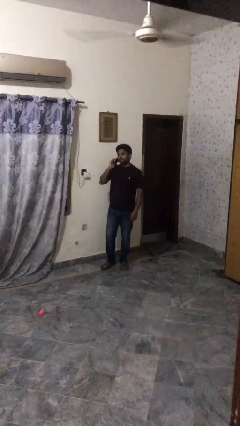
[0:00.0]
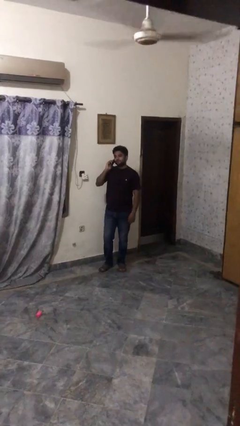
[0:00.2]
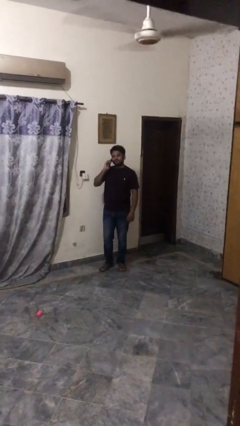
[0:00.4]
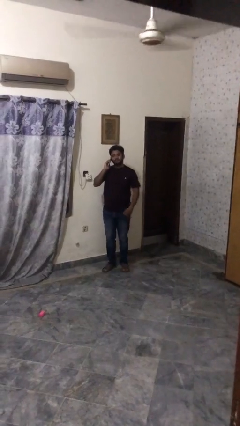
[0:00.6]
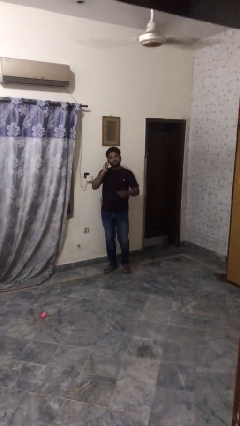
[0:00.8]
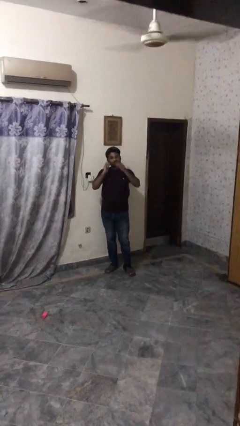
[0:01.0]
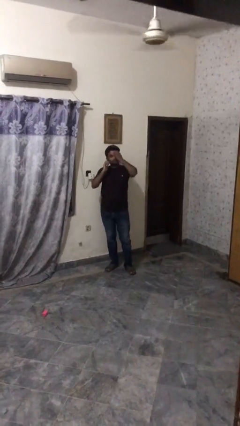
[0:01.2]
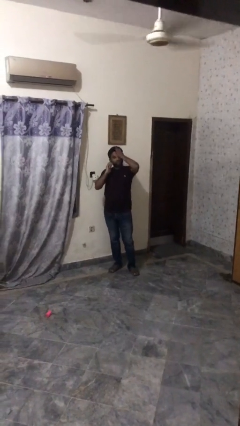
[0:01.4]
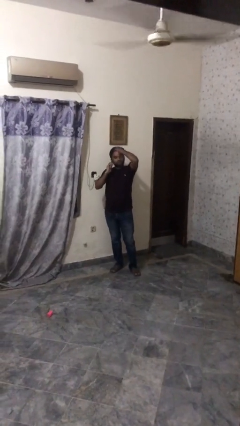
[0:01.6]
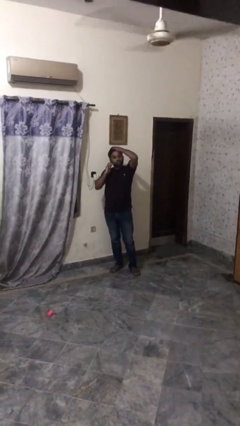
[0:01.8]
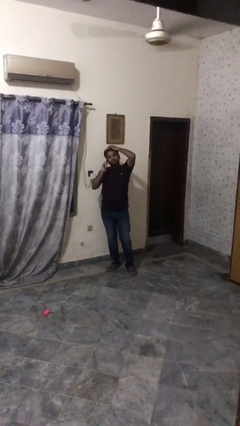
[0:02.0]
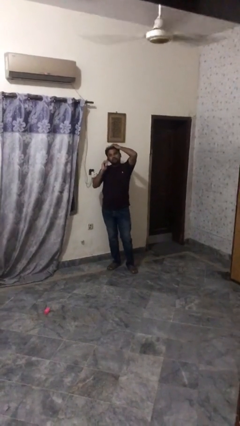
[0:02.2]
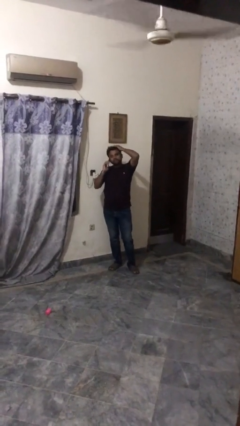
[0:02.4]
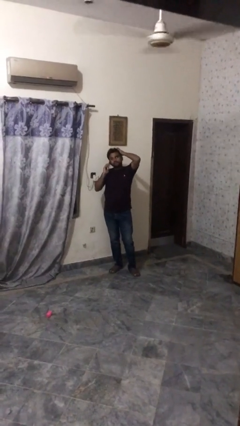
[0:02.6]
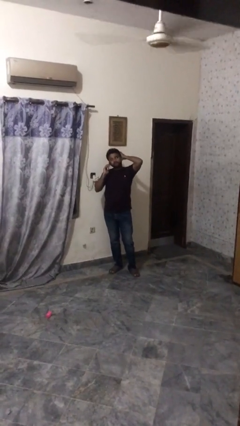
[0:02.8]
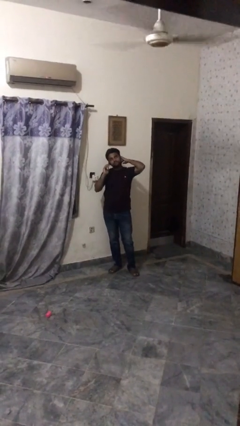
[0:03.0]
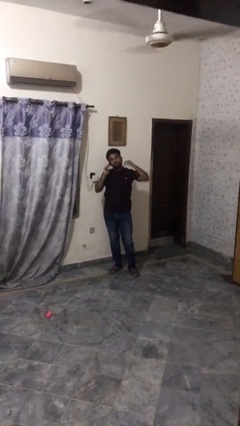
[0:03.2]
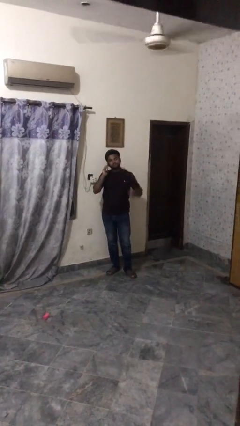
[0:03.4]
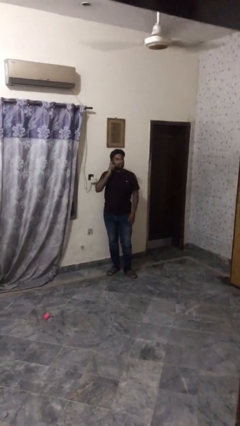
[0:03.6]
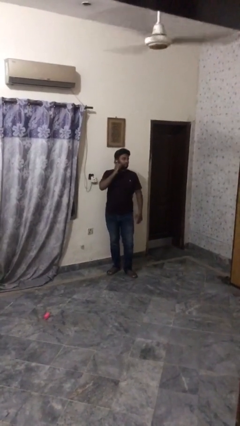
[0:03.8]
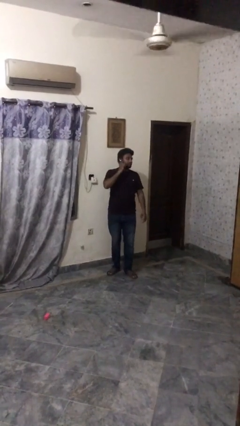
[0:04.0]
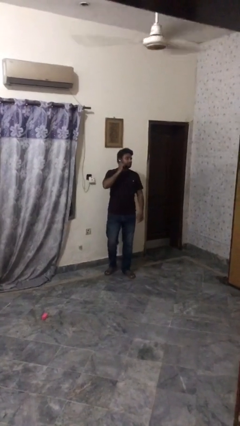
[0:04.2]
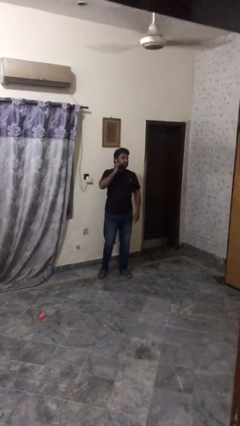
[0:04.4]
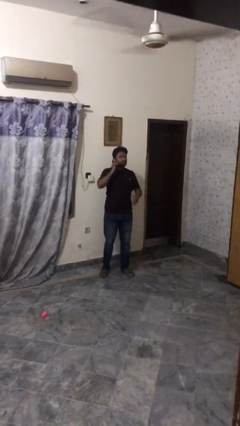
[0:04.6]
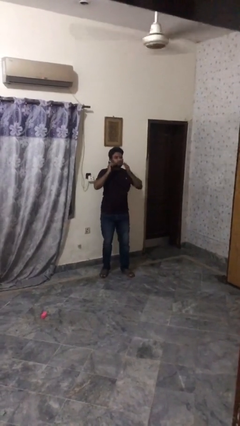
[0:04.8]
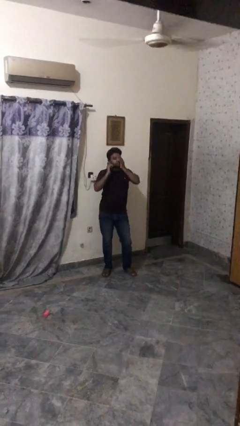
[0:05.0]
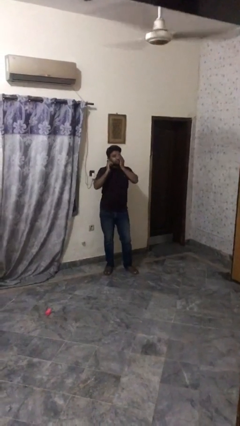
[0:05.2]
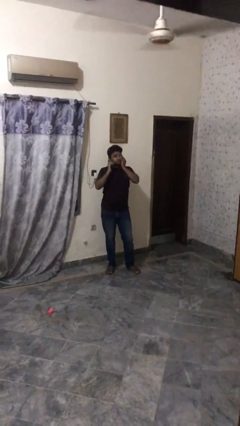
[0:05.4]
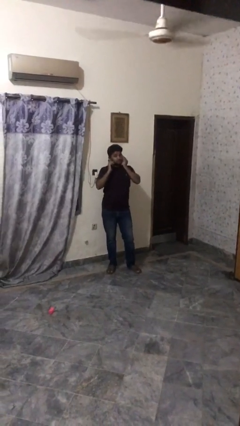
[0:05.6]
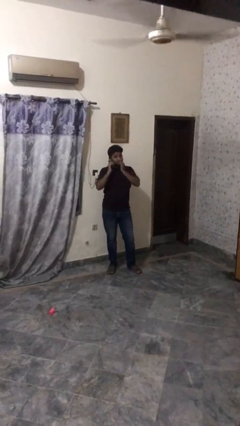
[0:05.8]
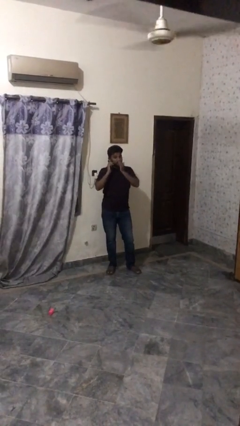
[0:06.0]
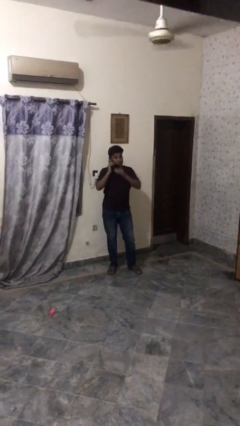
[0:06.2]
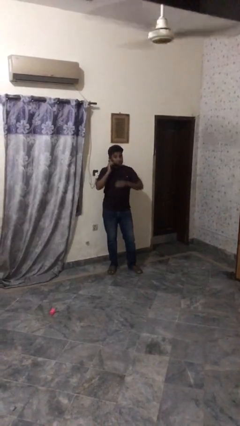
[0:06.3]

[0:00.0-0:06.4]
person talks on phone

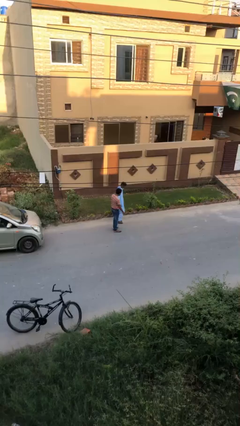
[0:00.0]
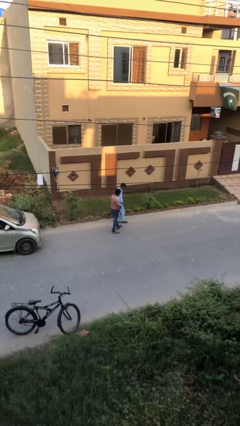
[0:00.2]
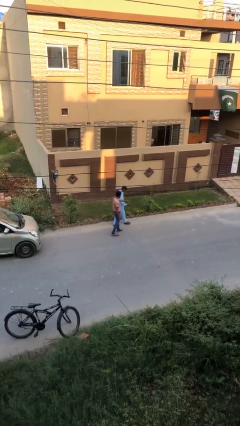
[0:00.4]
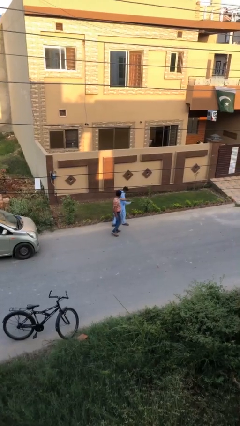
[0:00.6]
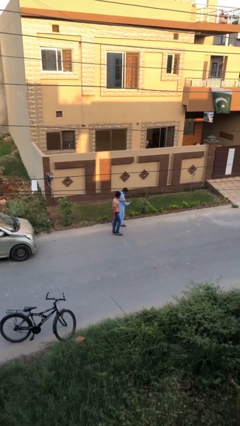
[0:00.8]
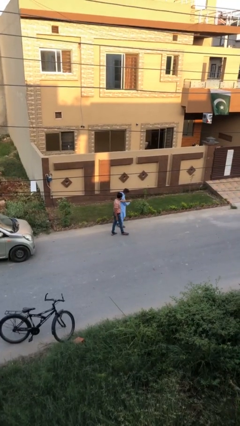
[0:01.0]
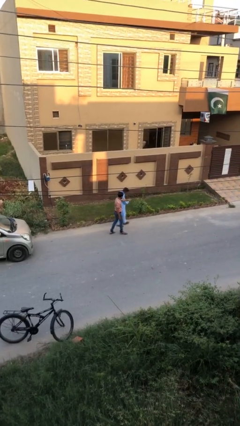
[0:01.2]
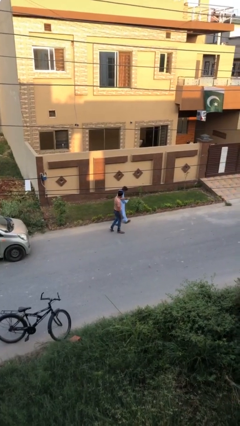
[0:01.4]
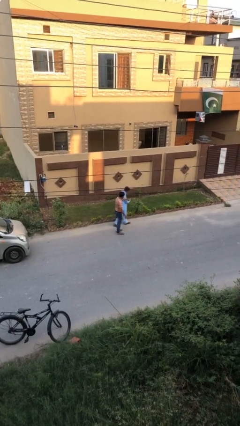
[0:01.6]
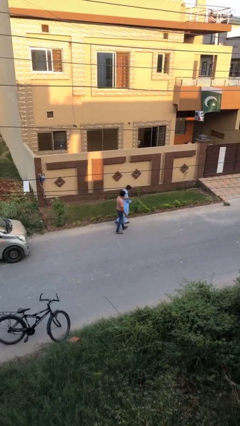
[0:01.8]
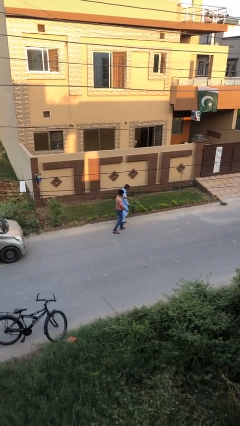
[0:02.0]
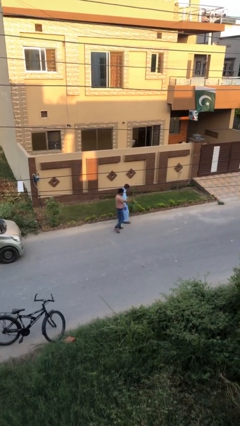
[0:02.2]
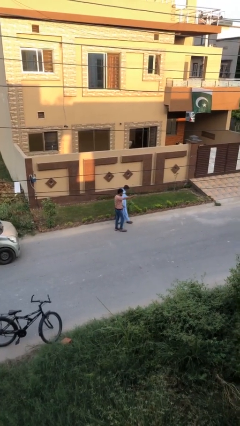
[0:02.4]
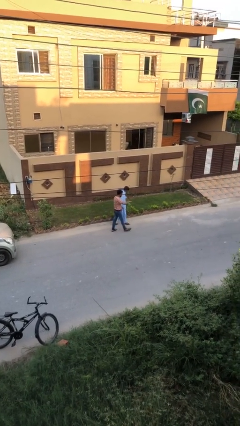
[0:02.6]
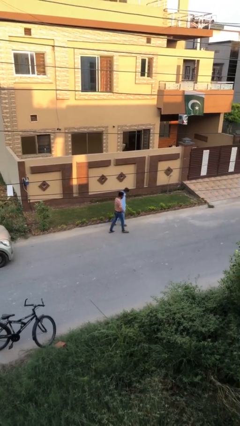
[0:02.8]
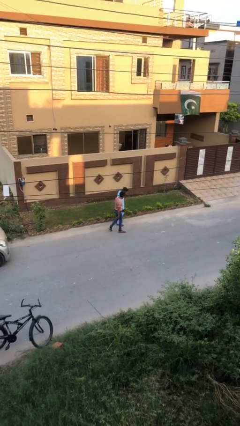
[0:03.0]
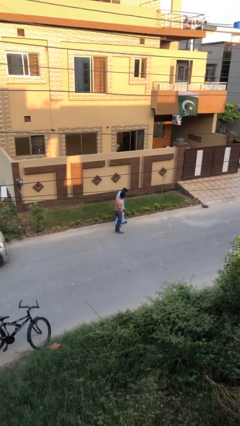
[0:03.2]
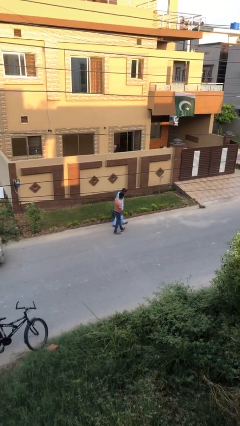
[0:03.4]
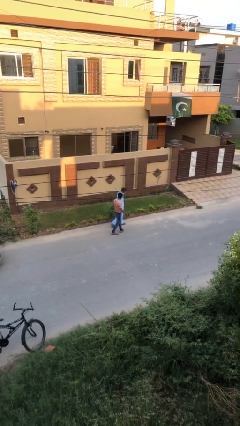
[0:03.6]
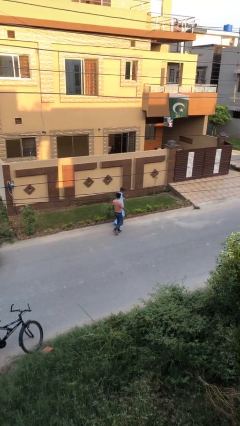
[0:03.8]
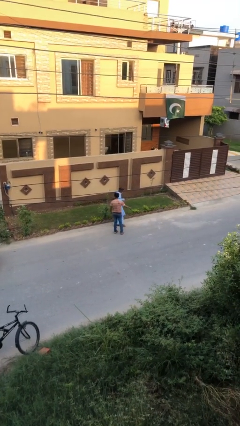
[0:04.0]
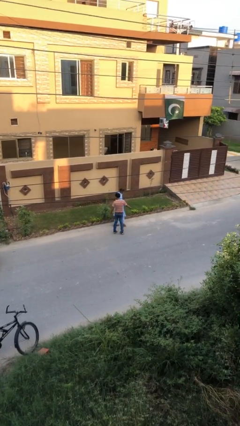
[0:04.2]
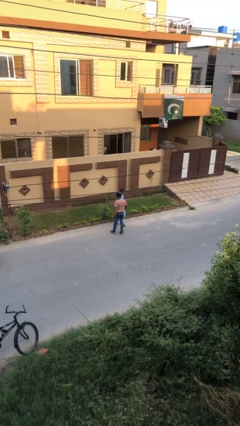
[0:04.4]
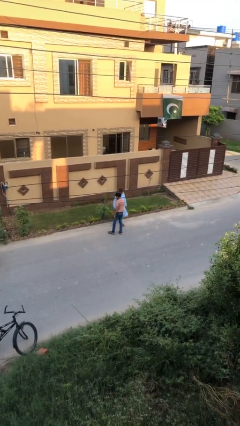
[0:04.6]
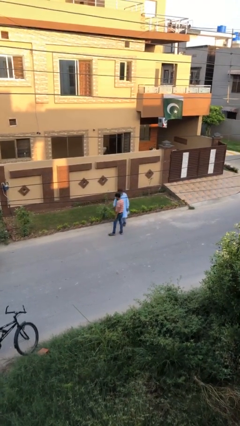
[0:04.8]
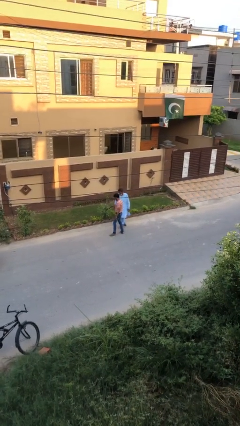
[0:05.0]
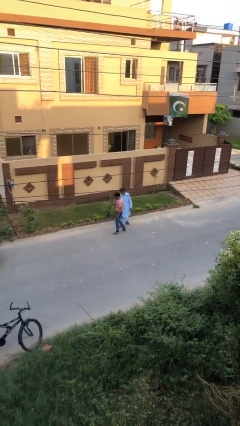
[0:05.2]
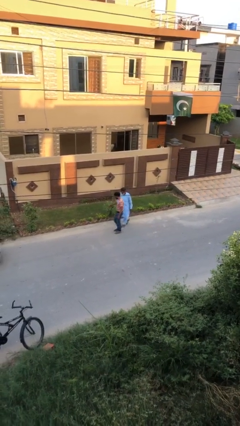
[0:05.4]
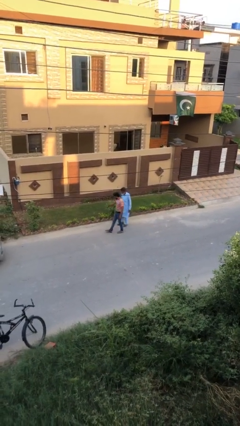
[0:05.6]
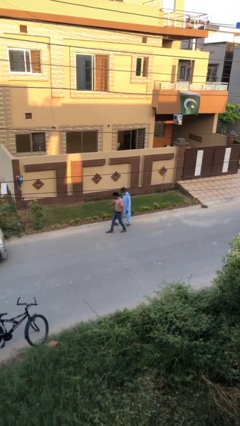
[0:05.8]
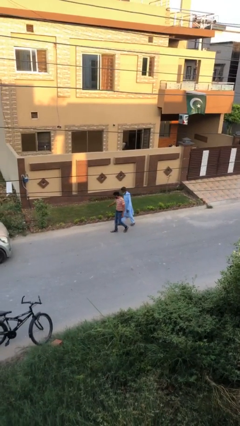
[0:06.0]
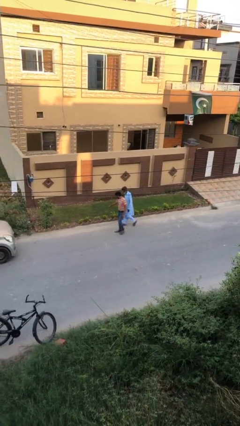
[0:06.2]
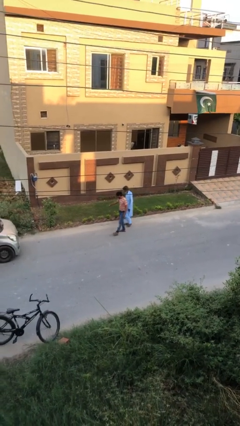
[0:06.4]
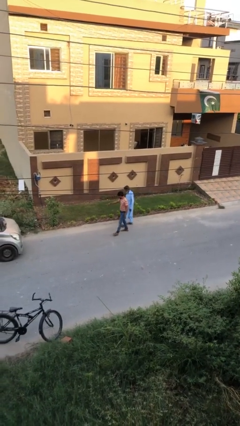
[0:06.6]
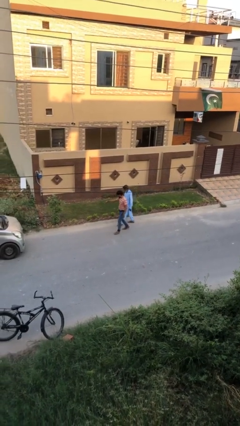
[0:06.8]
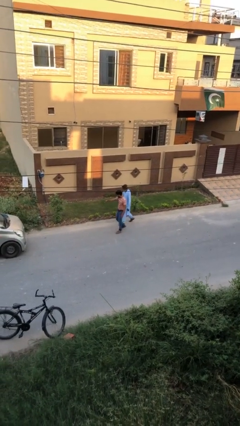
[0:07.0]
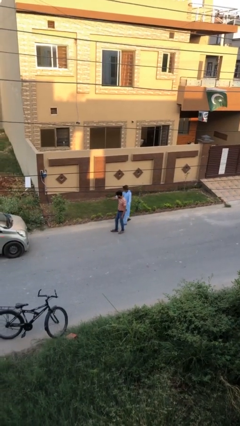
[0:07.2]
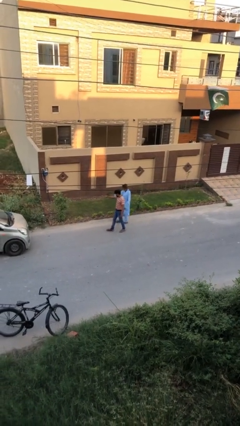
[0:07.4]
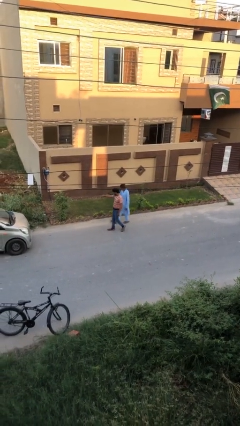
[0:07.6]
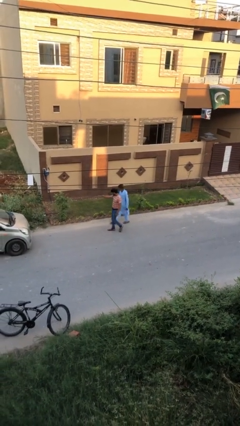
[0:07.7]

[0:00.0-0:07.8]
person talks to person

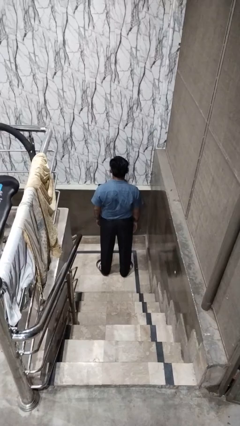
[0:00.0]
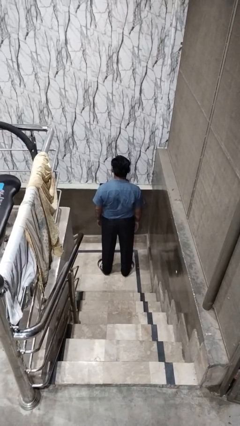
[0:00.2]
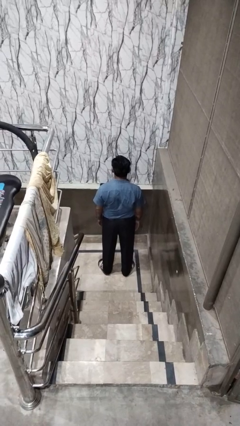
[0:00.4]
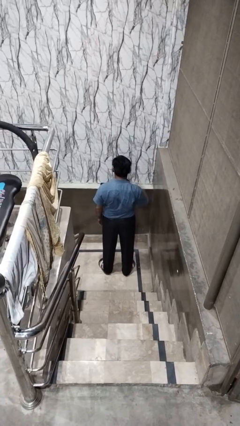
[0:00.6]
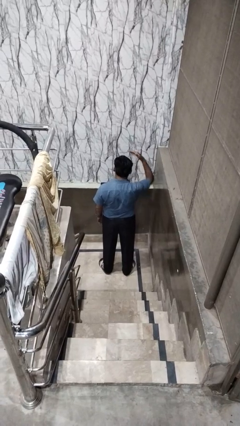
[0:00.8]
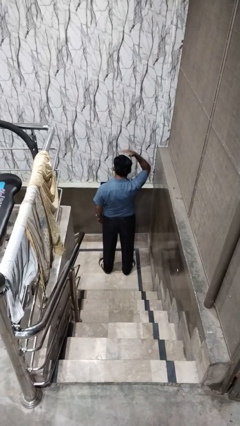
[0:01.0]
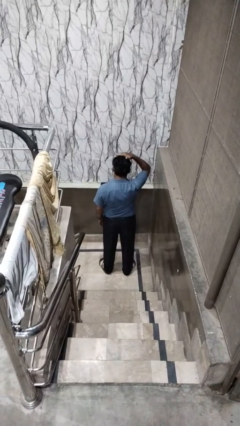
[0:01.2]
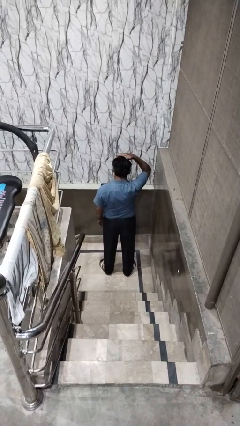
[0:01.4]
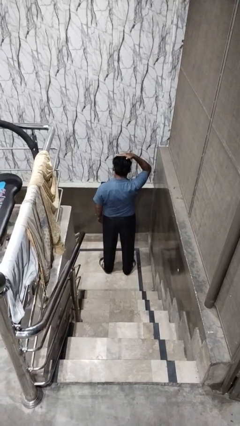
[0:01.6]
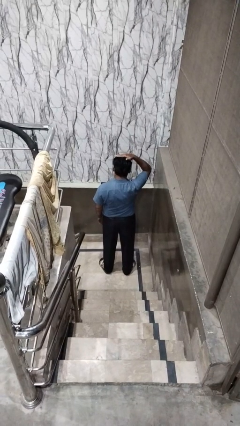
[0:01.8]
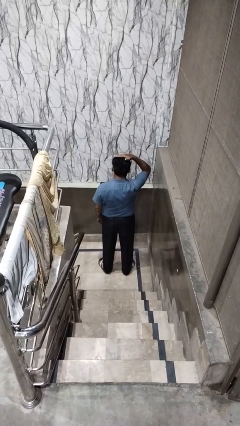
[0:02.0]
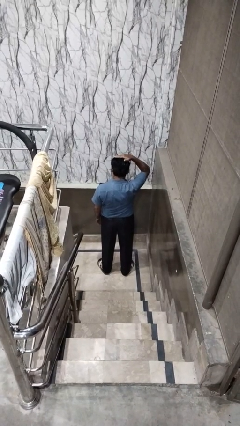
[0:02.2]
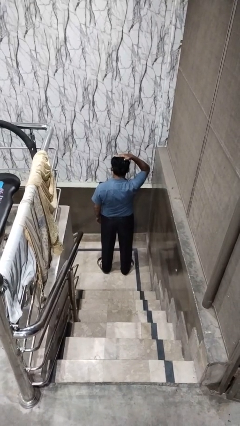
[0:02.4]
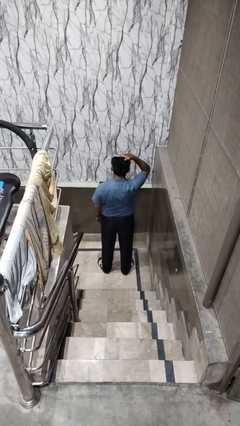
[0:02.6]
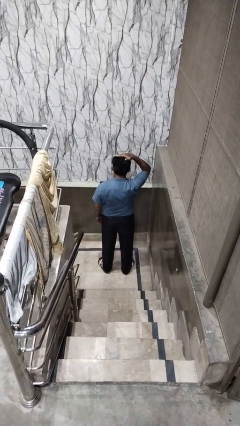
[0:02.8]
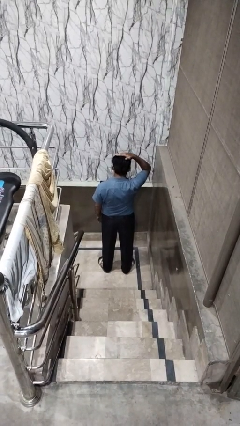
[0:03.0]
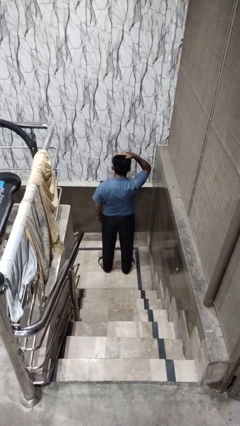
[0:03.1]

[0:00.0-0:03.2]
person pats head

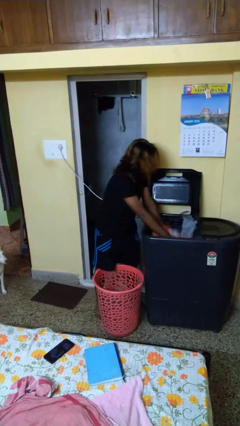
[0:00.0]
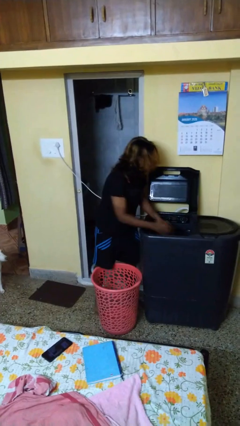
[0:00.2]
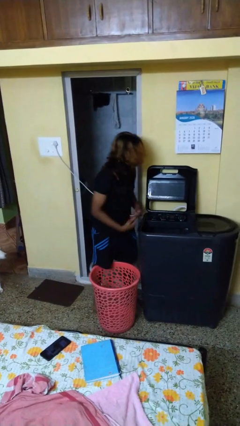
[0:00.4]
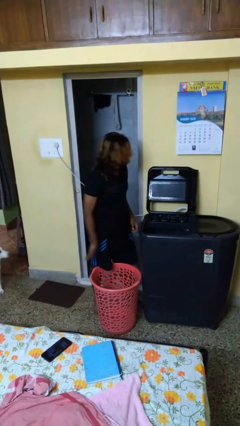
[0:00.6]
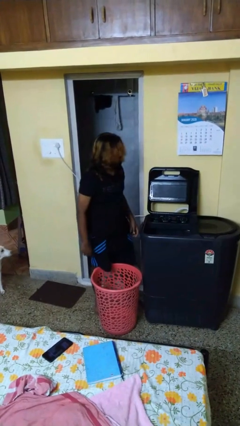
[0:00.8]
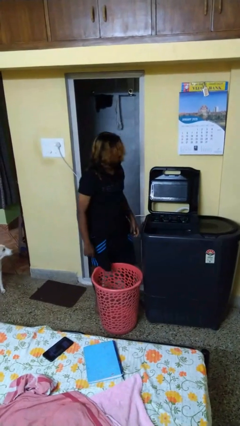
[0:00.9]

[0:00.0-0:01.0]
person loads clotheswasher
